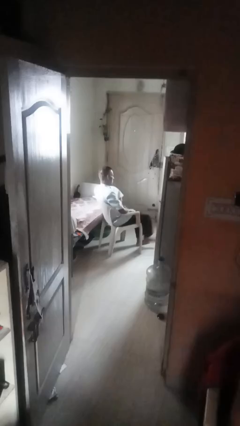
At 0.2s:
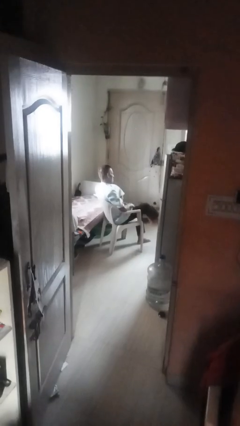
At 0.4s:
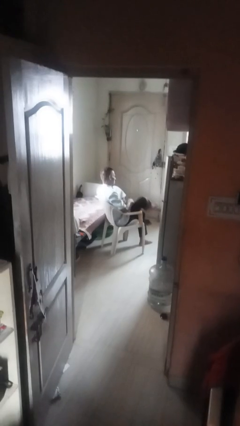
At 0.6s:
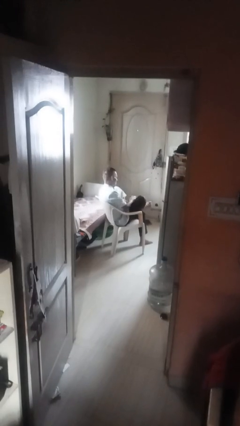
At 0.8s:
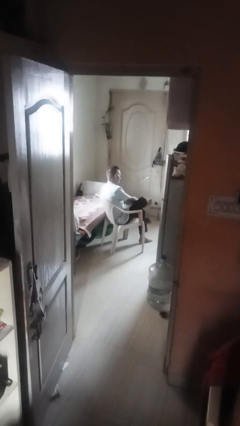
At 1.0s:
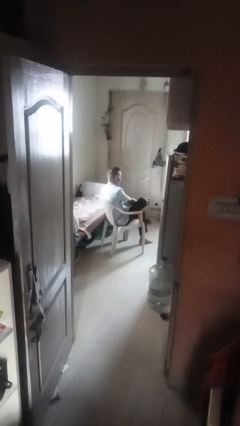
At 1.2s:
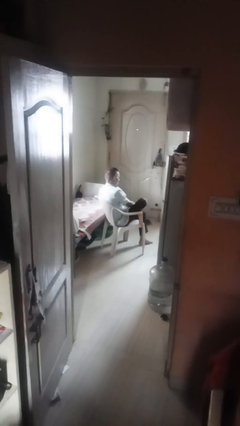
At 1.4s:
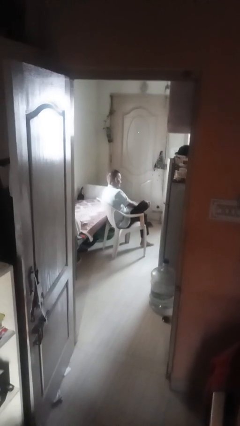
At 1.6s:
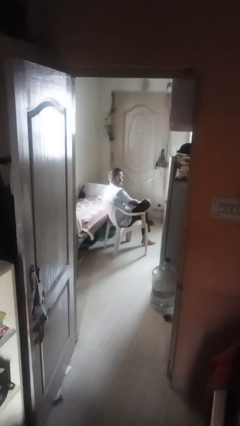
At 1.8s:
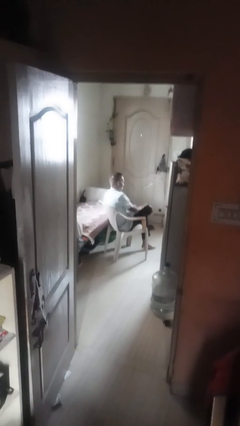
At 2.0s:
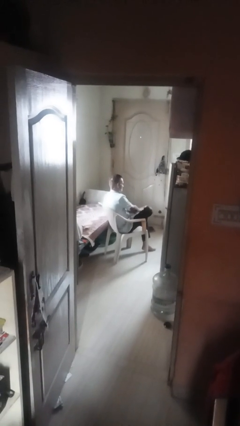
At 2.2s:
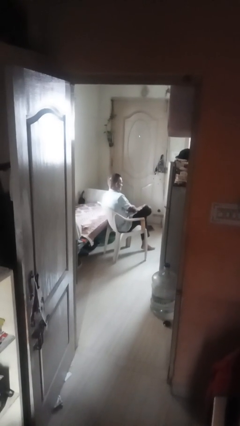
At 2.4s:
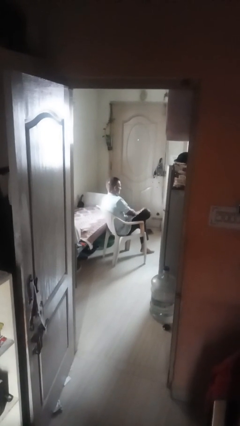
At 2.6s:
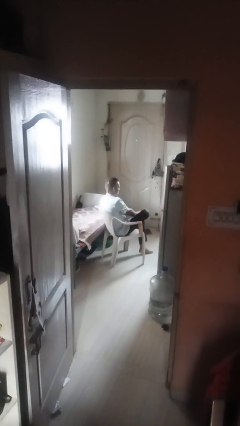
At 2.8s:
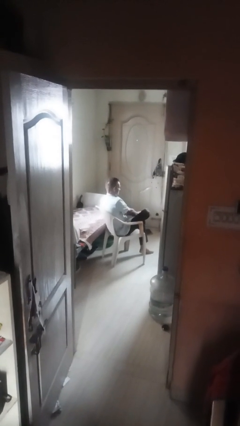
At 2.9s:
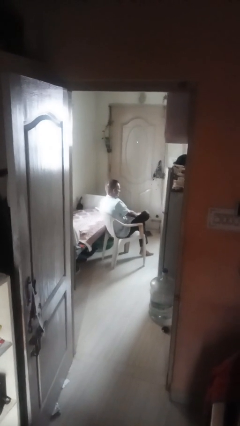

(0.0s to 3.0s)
person rubs foot

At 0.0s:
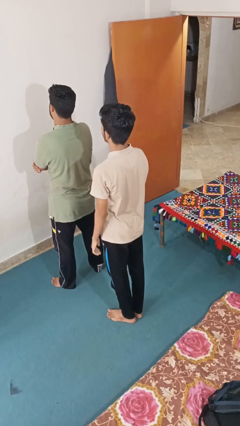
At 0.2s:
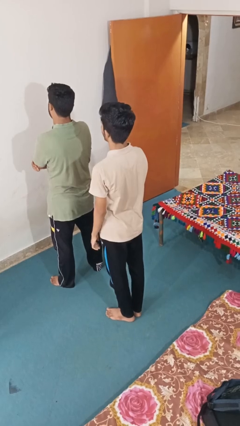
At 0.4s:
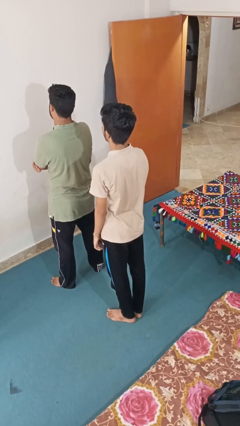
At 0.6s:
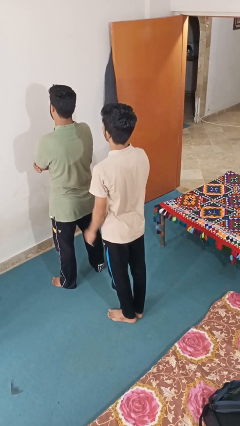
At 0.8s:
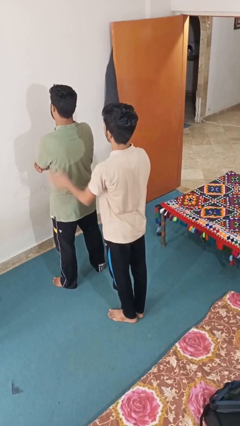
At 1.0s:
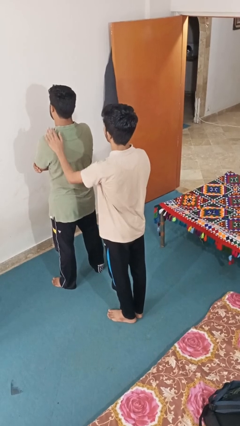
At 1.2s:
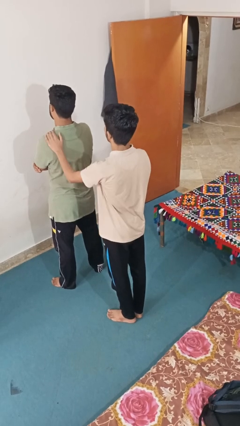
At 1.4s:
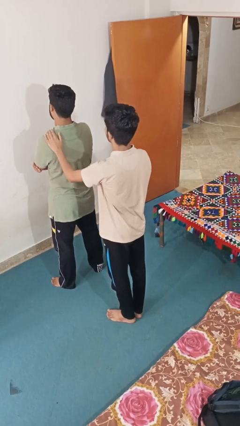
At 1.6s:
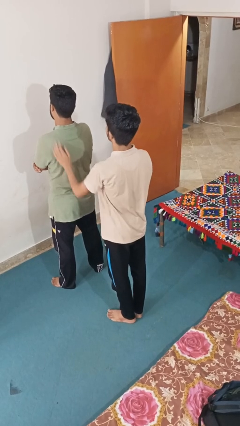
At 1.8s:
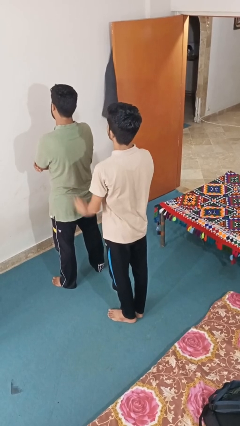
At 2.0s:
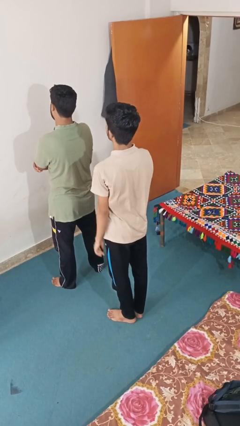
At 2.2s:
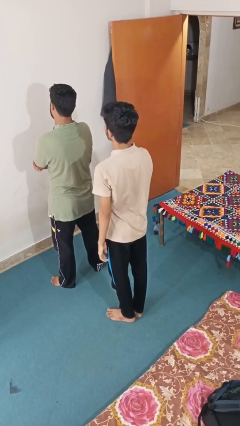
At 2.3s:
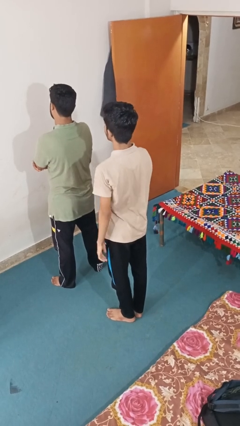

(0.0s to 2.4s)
person touches back of person

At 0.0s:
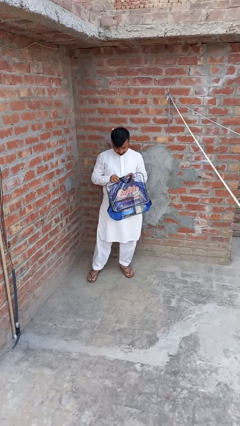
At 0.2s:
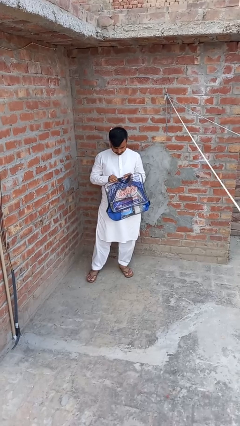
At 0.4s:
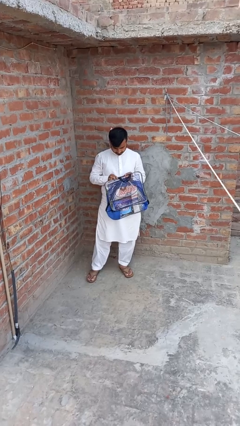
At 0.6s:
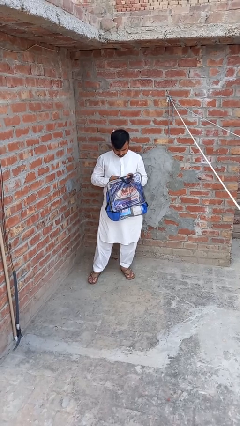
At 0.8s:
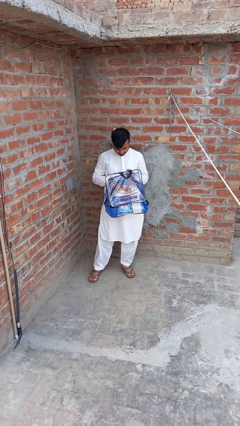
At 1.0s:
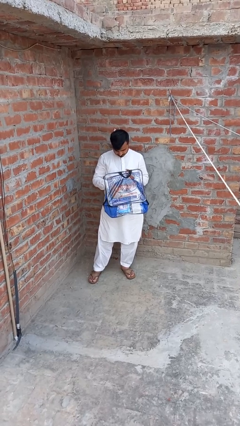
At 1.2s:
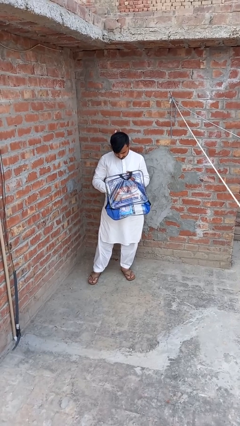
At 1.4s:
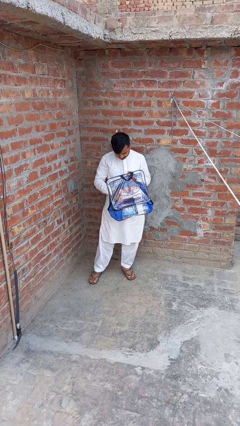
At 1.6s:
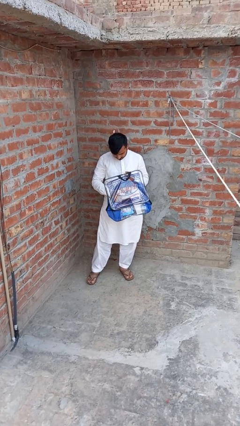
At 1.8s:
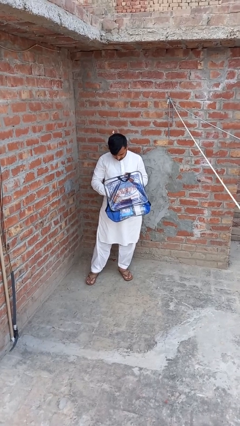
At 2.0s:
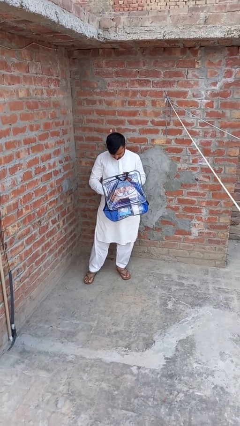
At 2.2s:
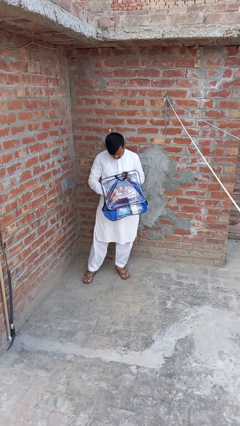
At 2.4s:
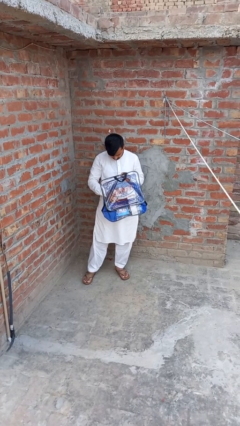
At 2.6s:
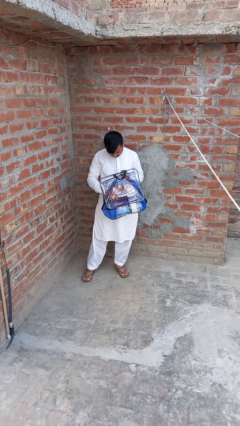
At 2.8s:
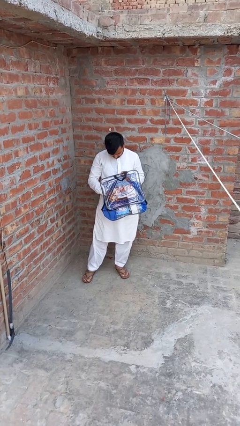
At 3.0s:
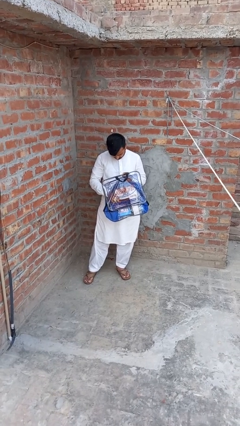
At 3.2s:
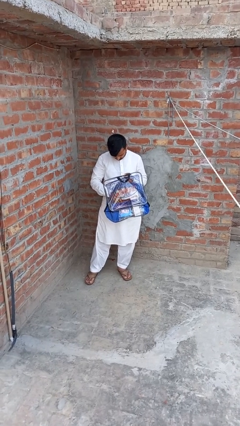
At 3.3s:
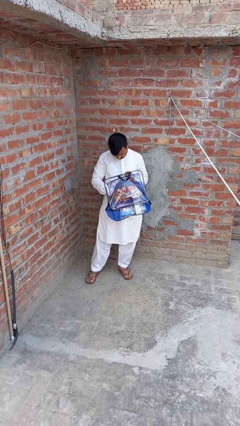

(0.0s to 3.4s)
person searches in backpack

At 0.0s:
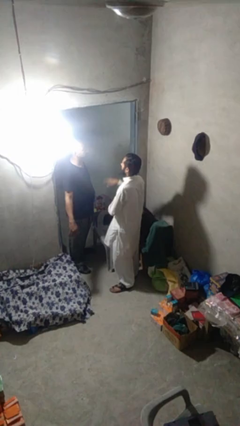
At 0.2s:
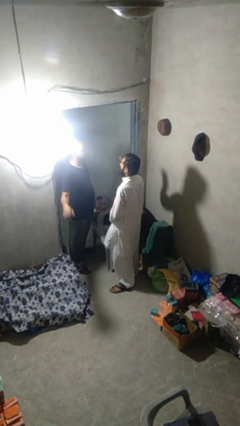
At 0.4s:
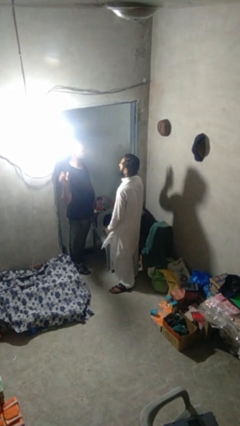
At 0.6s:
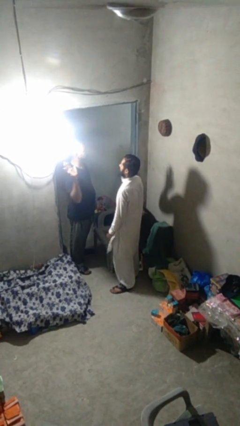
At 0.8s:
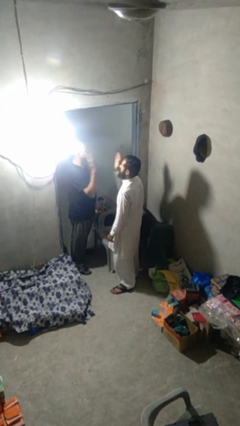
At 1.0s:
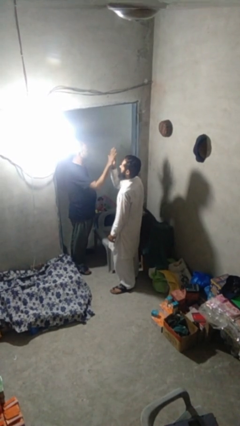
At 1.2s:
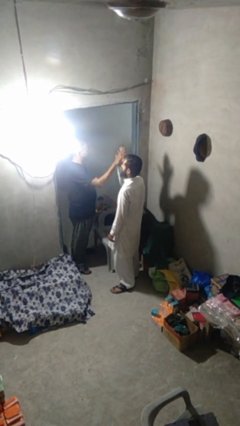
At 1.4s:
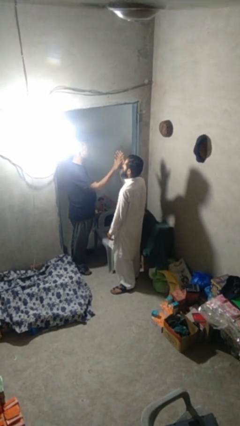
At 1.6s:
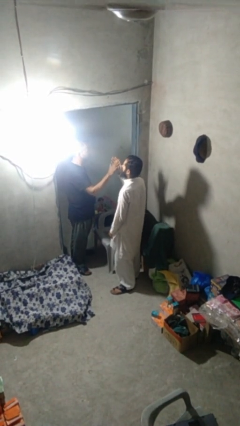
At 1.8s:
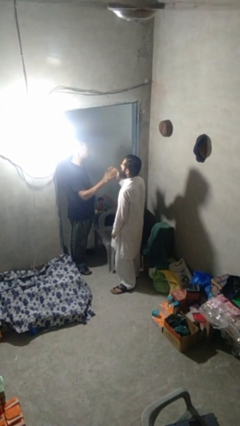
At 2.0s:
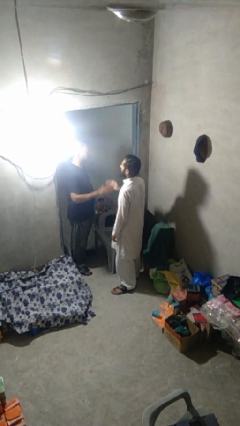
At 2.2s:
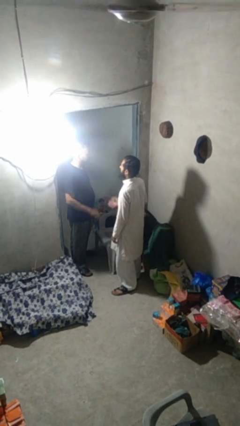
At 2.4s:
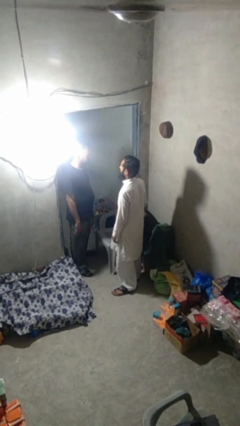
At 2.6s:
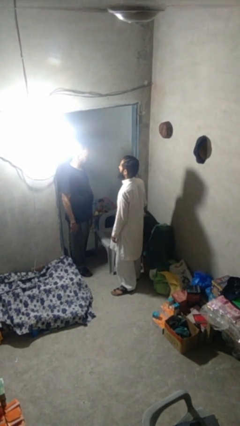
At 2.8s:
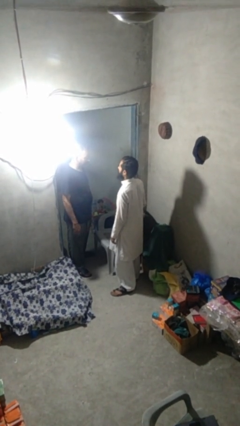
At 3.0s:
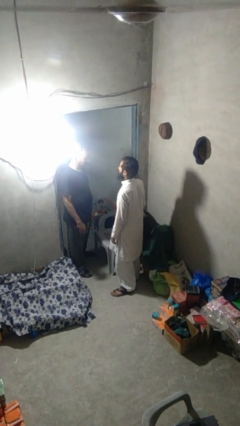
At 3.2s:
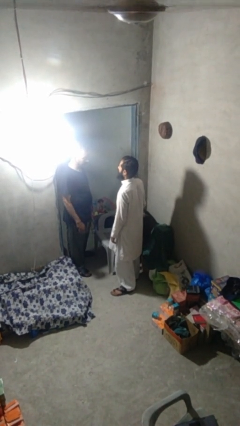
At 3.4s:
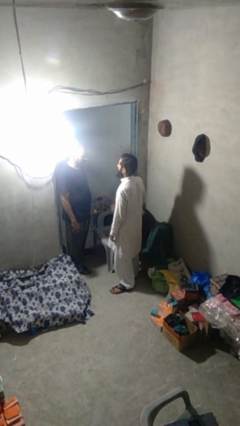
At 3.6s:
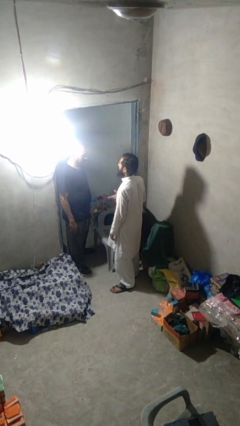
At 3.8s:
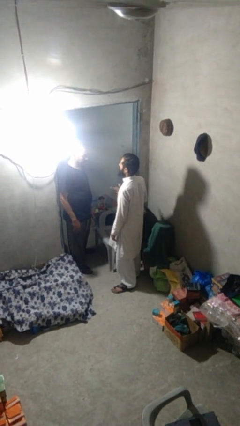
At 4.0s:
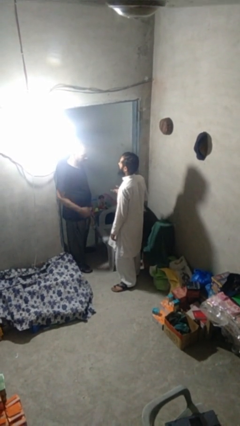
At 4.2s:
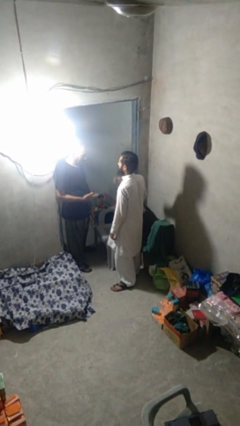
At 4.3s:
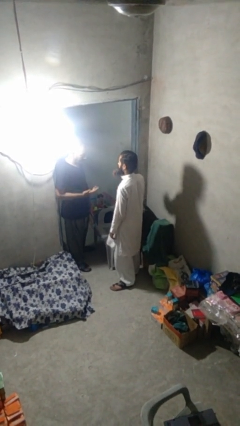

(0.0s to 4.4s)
person highfives hand

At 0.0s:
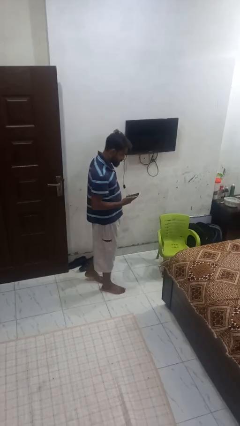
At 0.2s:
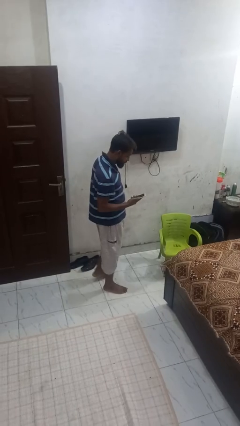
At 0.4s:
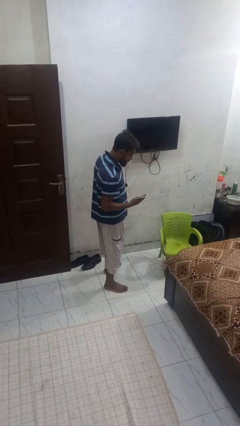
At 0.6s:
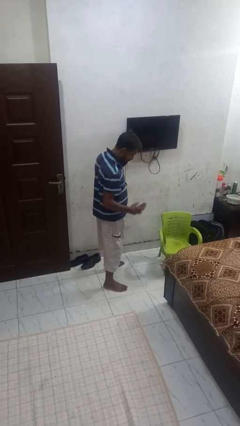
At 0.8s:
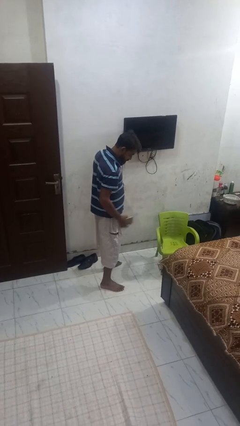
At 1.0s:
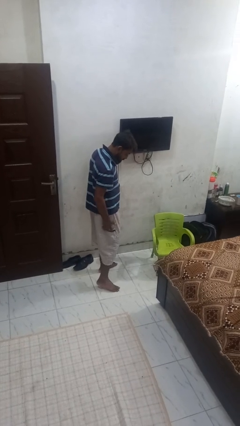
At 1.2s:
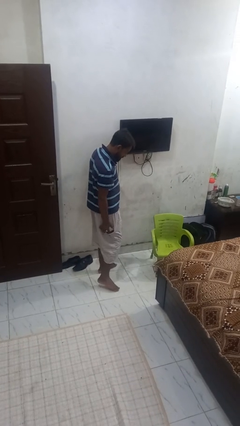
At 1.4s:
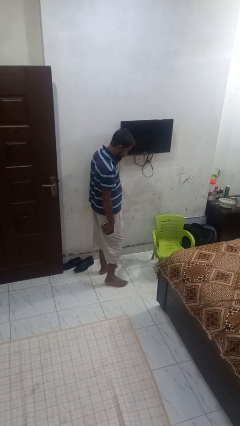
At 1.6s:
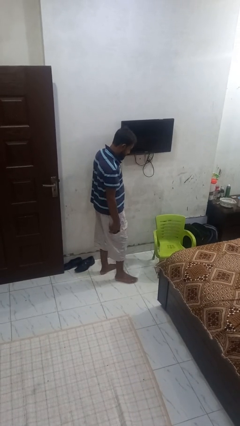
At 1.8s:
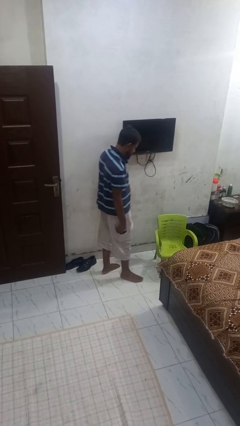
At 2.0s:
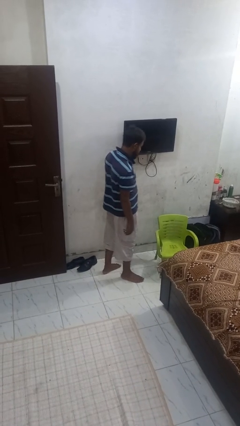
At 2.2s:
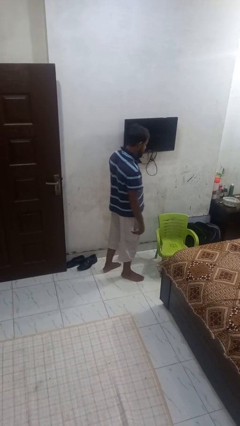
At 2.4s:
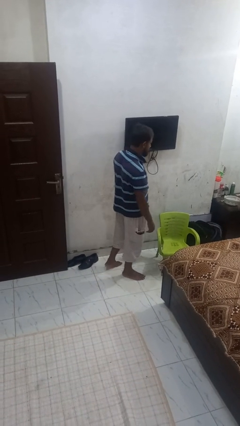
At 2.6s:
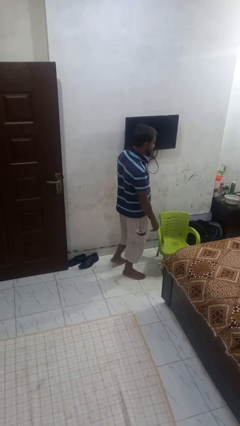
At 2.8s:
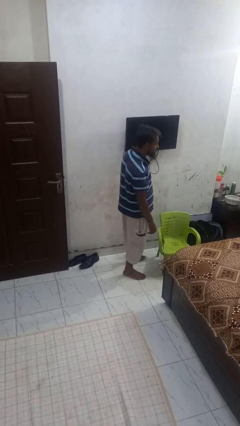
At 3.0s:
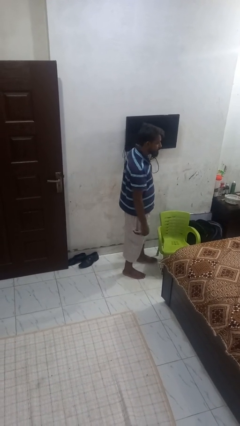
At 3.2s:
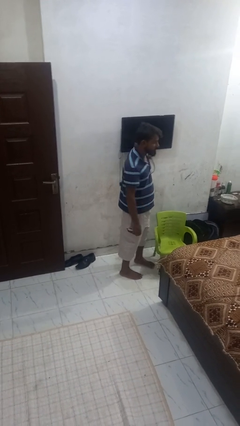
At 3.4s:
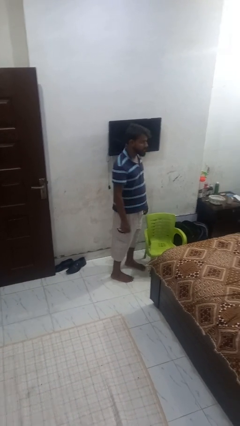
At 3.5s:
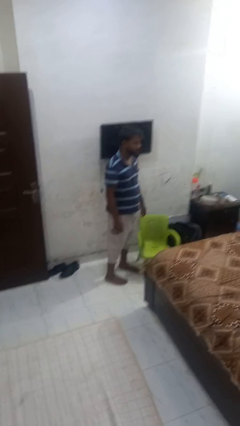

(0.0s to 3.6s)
person puts phone into pocket

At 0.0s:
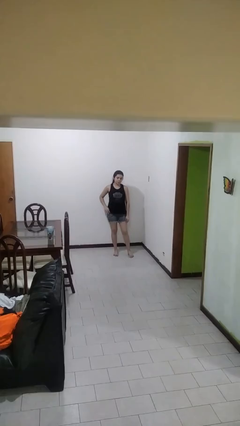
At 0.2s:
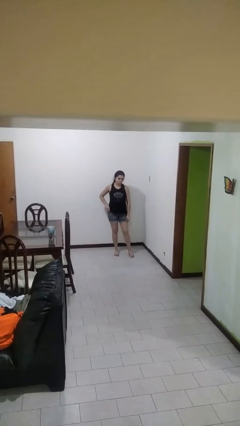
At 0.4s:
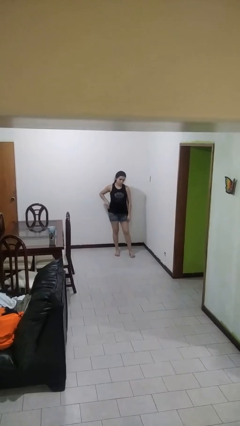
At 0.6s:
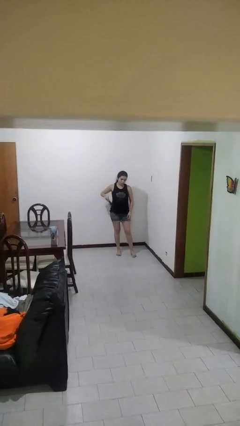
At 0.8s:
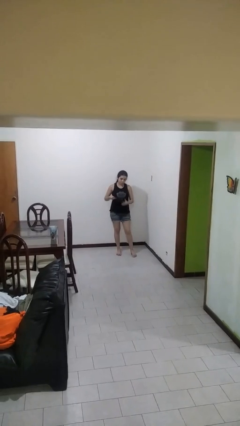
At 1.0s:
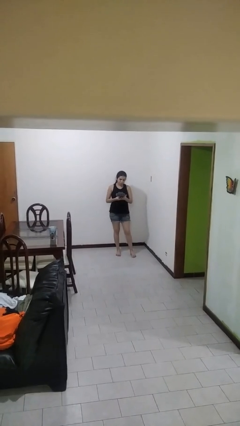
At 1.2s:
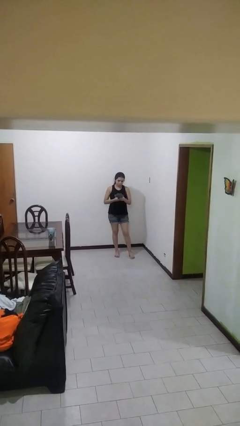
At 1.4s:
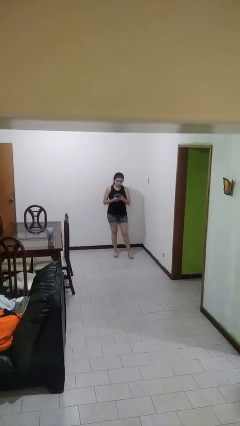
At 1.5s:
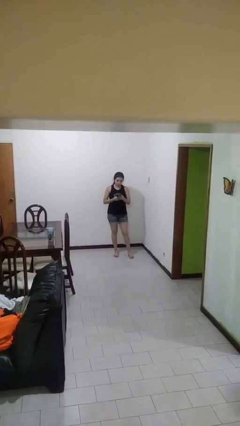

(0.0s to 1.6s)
person takes phone from pocket
